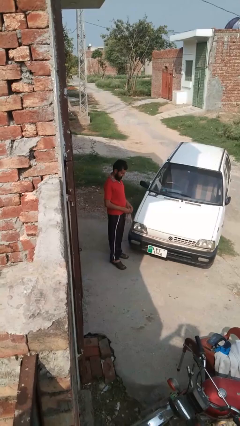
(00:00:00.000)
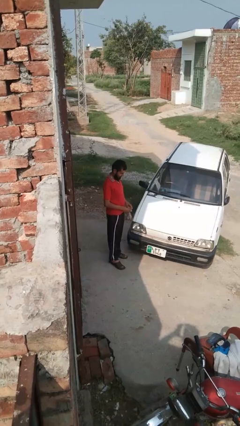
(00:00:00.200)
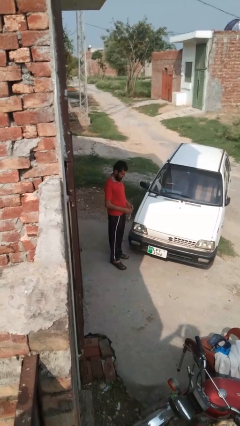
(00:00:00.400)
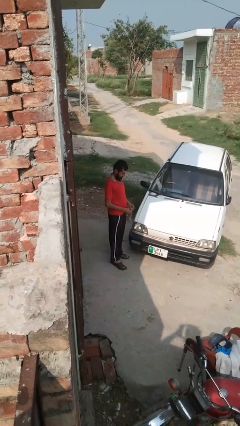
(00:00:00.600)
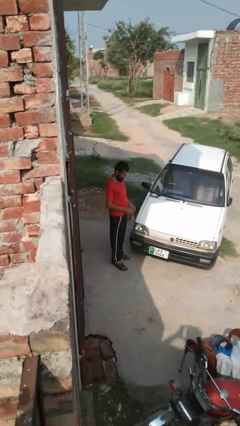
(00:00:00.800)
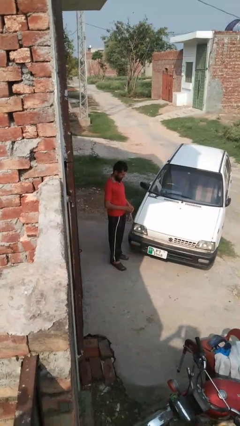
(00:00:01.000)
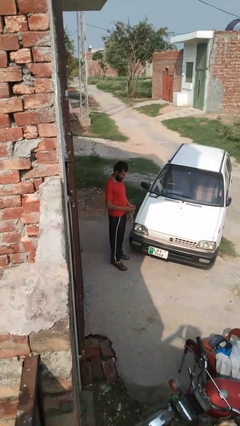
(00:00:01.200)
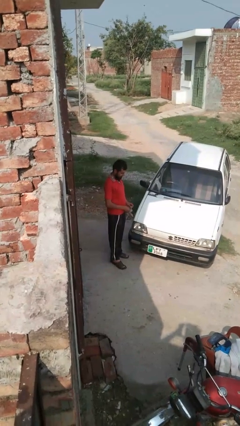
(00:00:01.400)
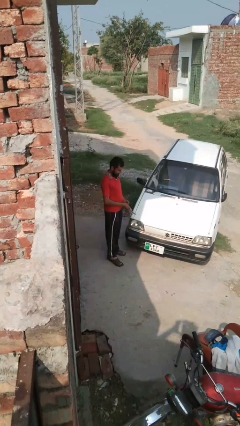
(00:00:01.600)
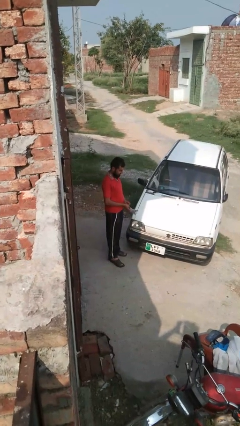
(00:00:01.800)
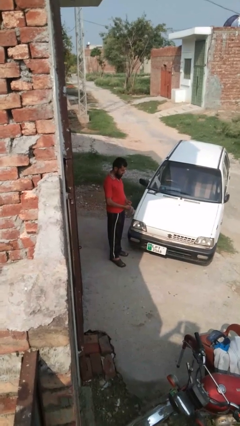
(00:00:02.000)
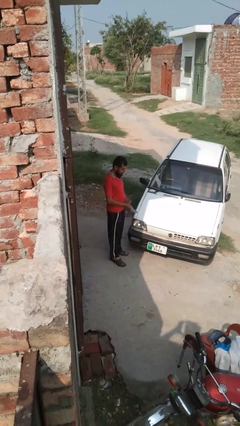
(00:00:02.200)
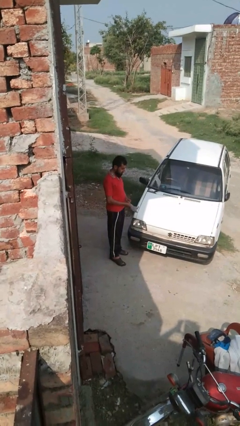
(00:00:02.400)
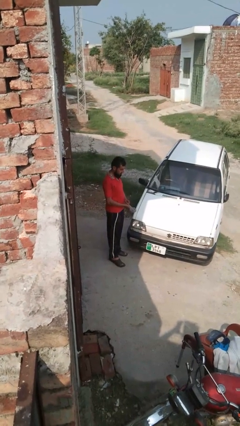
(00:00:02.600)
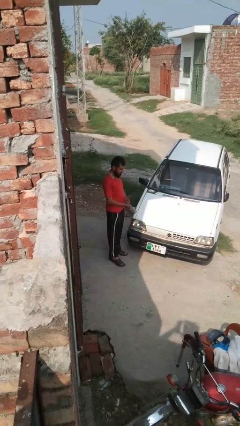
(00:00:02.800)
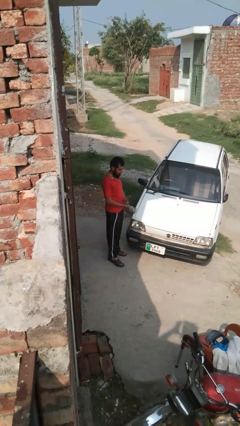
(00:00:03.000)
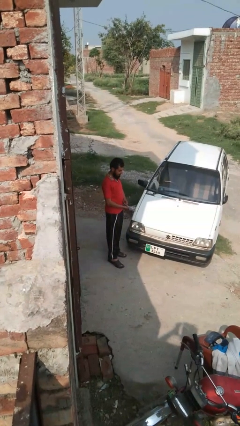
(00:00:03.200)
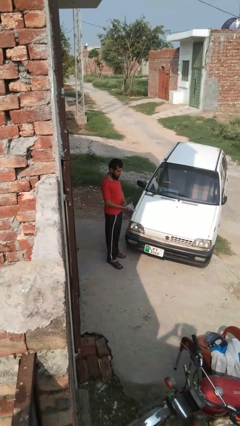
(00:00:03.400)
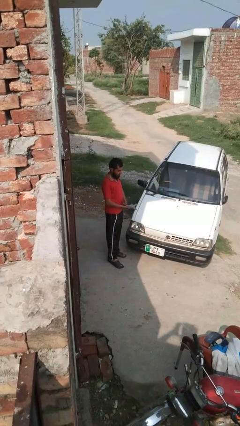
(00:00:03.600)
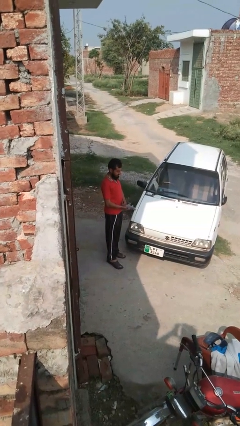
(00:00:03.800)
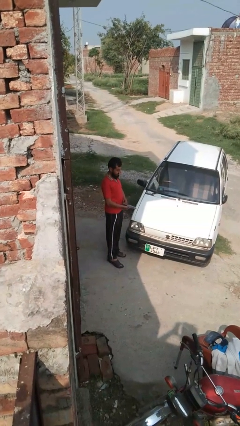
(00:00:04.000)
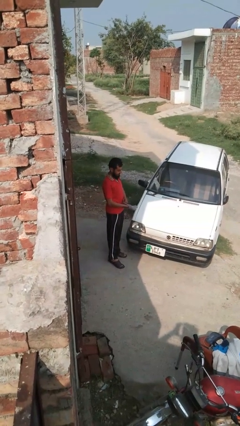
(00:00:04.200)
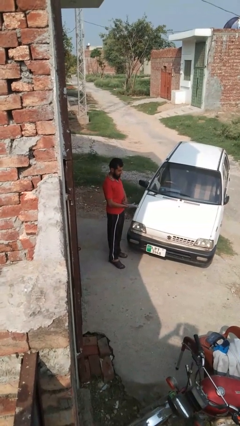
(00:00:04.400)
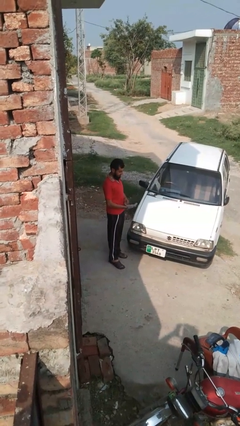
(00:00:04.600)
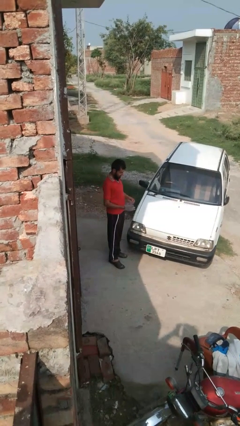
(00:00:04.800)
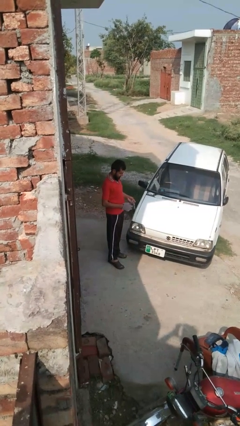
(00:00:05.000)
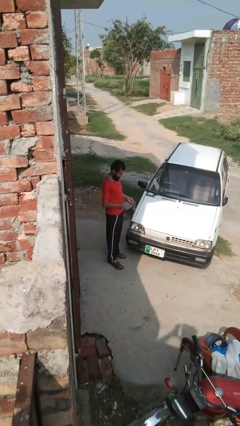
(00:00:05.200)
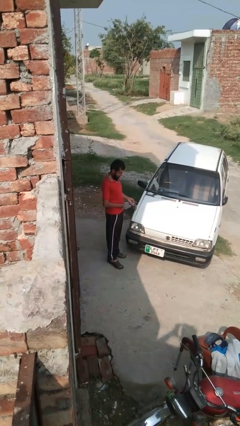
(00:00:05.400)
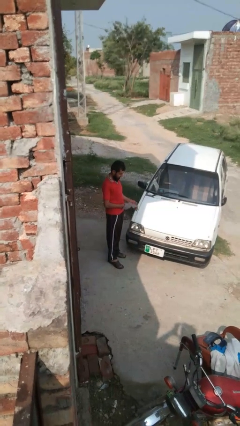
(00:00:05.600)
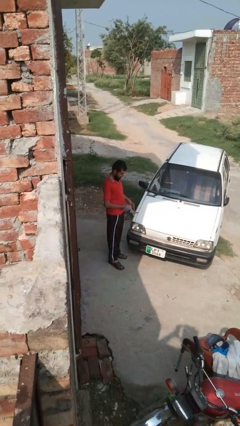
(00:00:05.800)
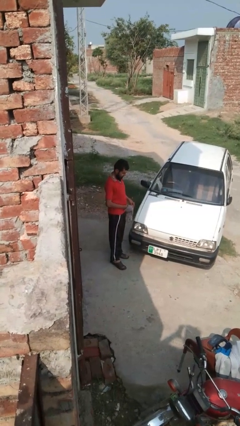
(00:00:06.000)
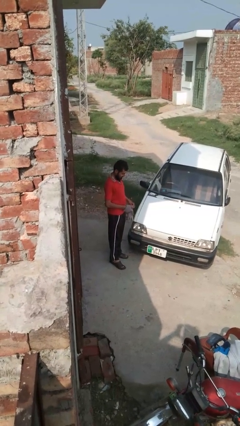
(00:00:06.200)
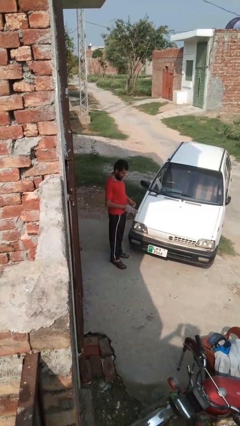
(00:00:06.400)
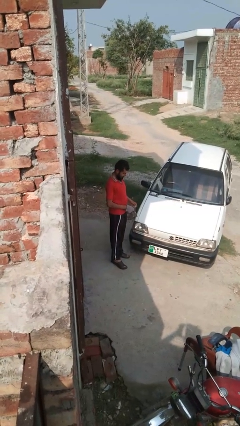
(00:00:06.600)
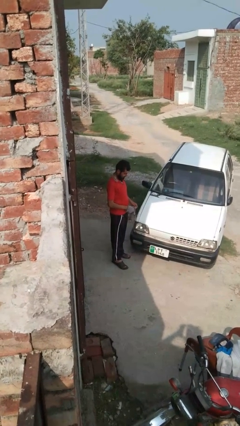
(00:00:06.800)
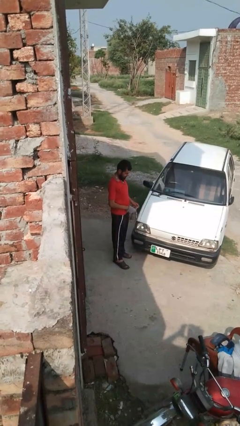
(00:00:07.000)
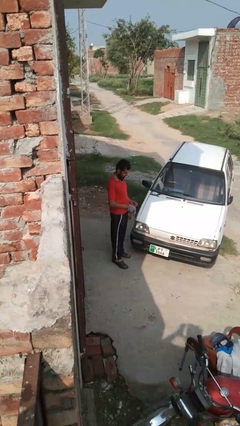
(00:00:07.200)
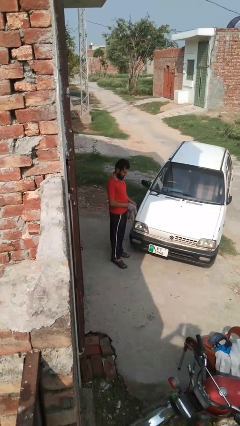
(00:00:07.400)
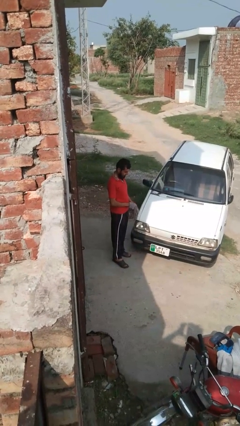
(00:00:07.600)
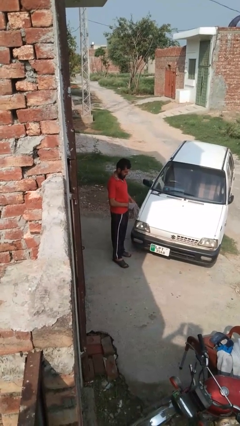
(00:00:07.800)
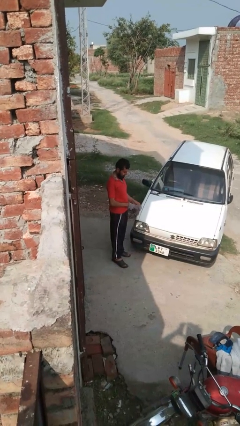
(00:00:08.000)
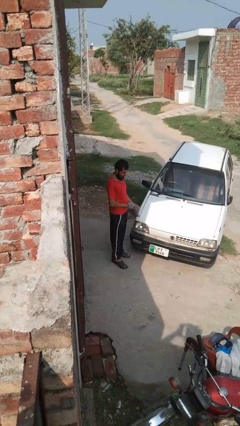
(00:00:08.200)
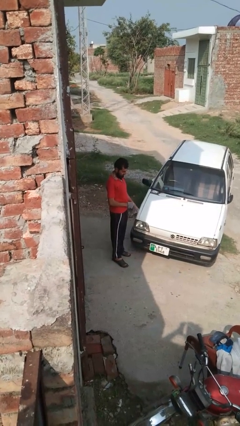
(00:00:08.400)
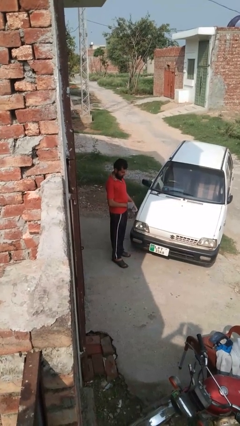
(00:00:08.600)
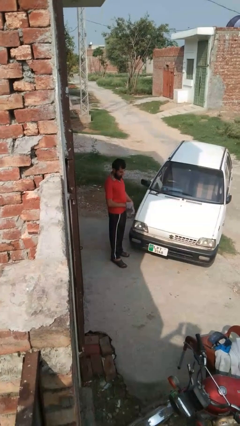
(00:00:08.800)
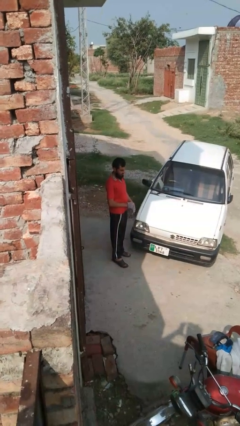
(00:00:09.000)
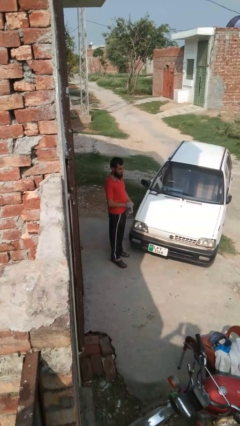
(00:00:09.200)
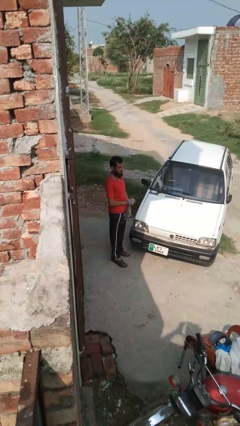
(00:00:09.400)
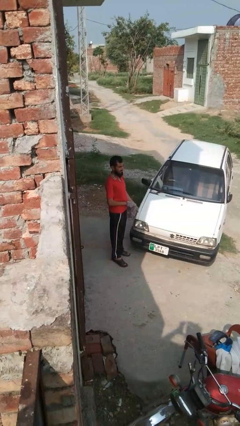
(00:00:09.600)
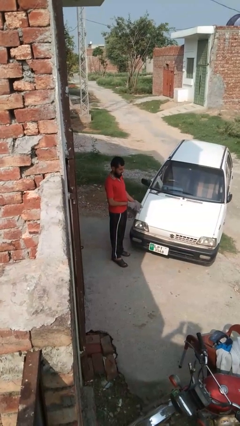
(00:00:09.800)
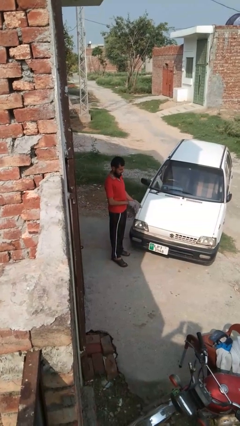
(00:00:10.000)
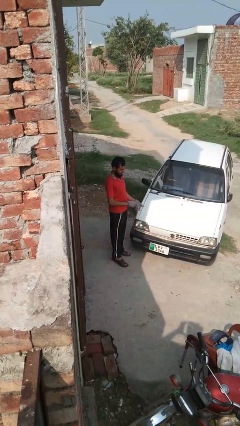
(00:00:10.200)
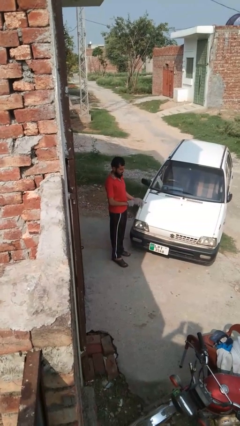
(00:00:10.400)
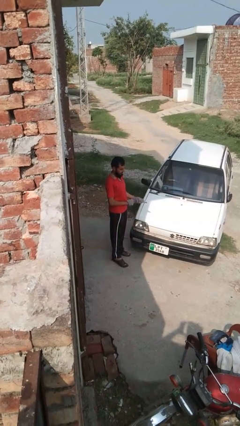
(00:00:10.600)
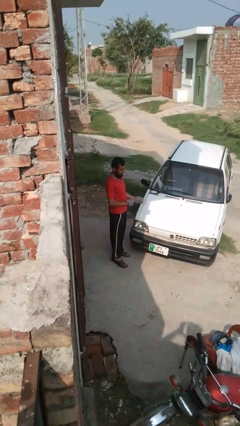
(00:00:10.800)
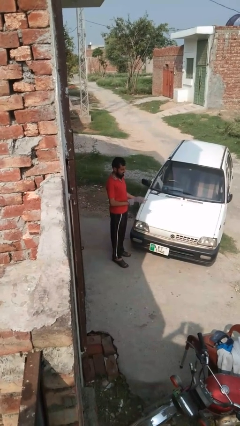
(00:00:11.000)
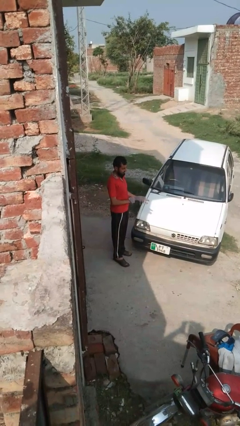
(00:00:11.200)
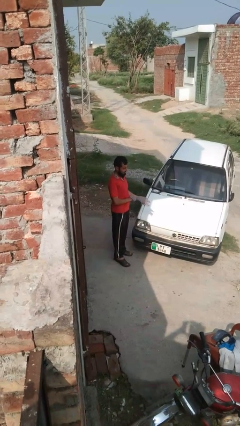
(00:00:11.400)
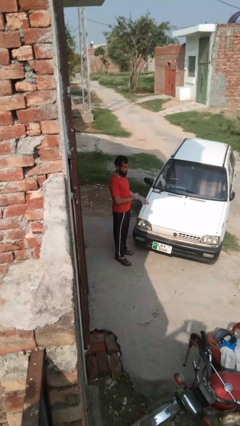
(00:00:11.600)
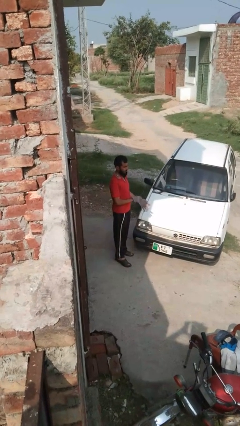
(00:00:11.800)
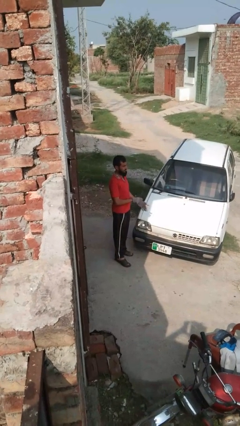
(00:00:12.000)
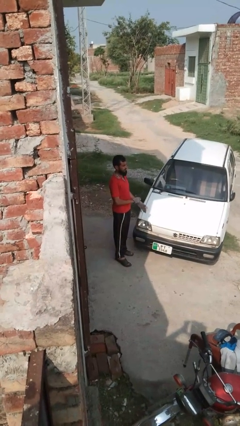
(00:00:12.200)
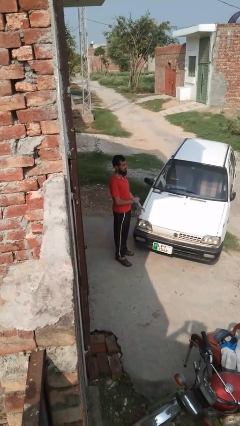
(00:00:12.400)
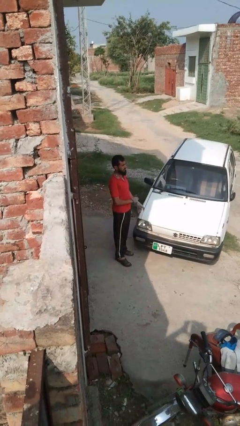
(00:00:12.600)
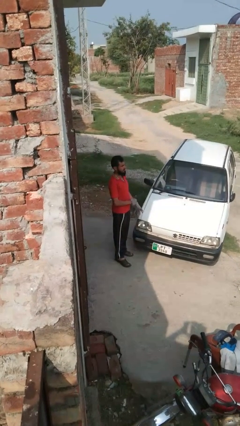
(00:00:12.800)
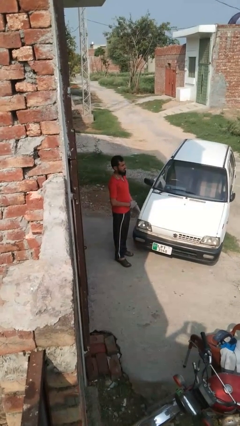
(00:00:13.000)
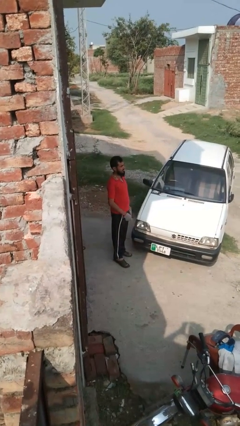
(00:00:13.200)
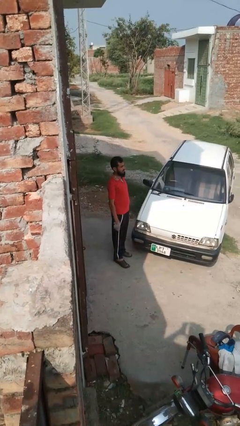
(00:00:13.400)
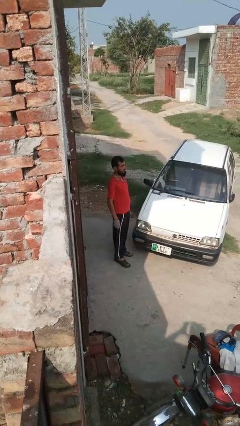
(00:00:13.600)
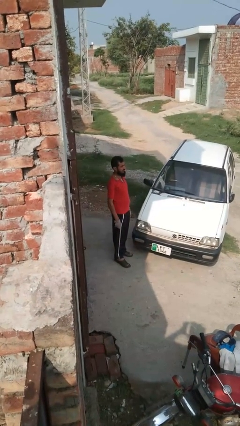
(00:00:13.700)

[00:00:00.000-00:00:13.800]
person puts on gloves

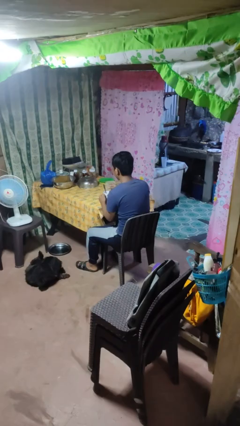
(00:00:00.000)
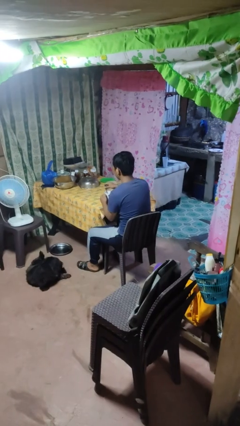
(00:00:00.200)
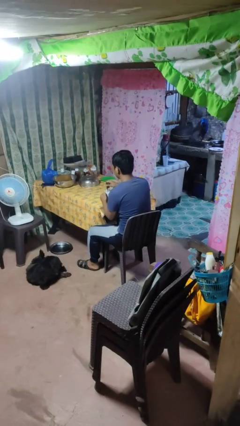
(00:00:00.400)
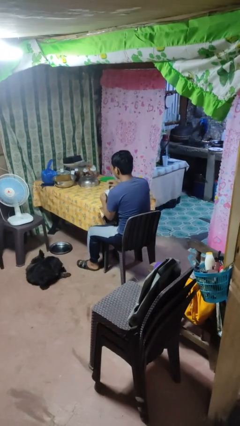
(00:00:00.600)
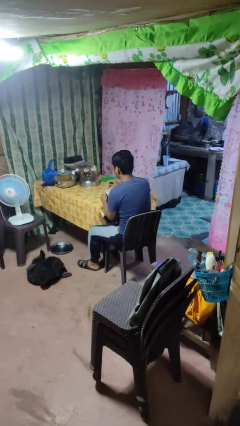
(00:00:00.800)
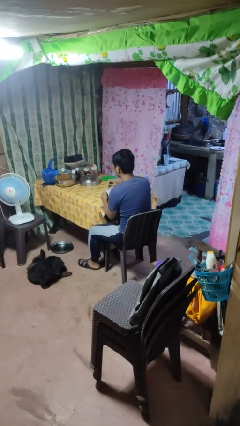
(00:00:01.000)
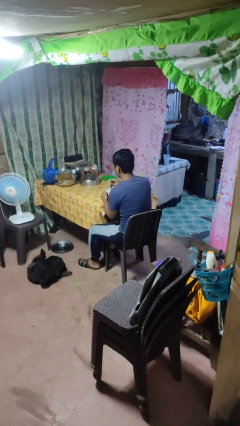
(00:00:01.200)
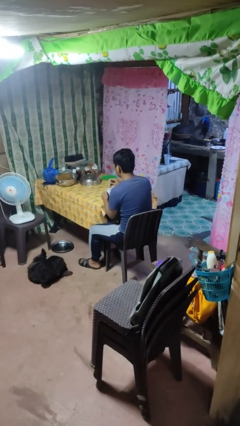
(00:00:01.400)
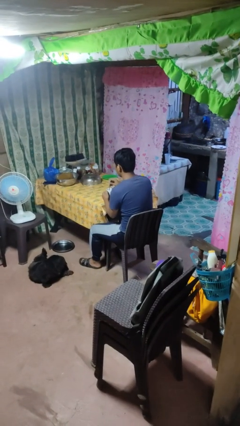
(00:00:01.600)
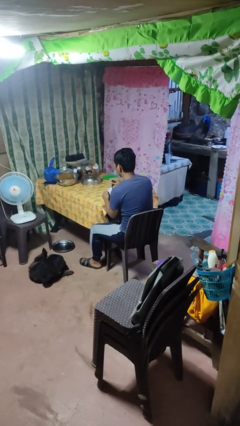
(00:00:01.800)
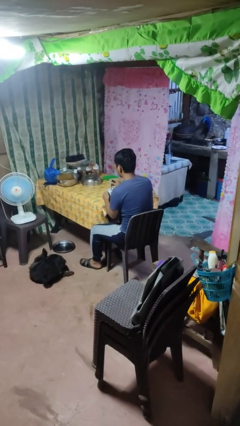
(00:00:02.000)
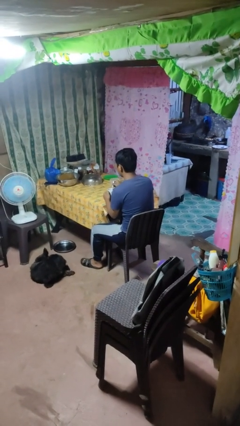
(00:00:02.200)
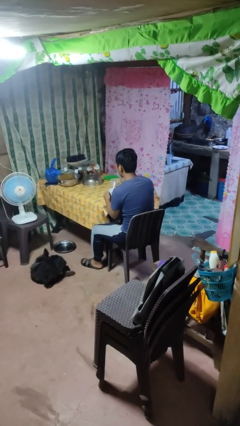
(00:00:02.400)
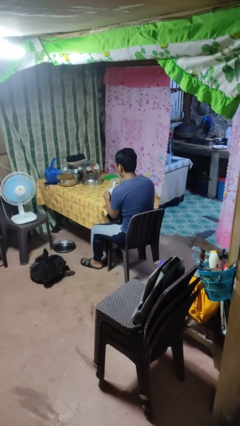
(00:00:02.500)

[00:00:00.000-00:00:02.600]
person stirs mug

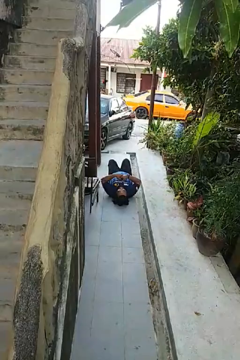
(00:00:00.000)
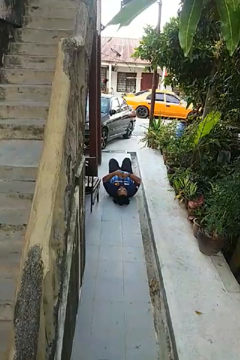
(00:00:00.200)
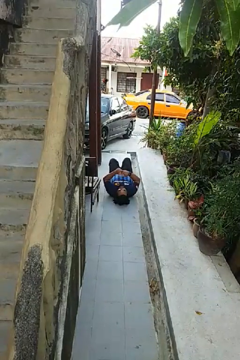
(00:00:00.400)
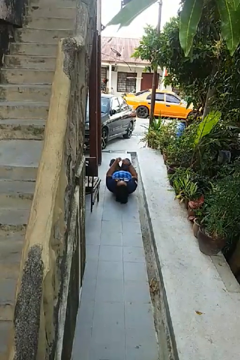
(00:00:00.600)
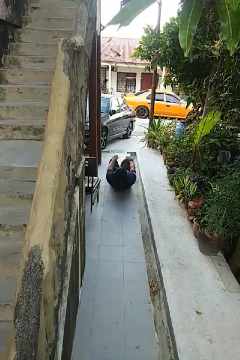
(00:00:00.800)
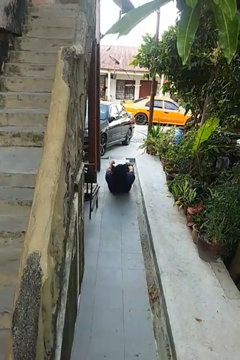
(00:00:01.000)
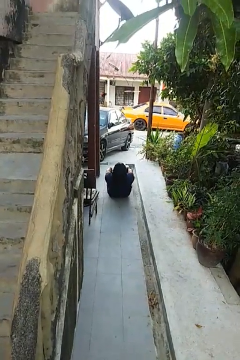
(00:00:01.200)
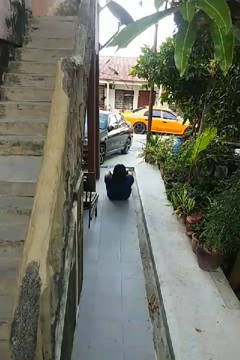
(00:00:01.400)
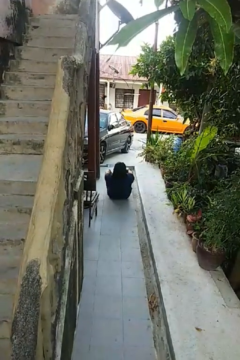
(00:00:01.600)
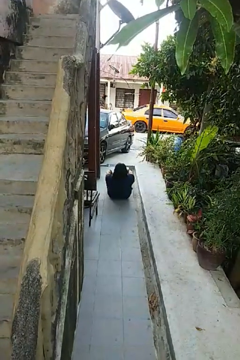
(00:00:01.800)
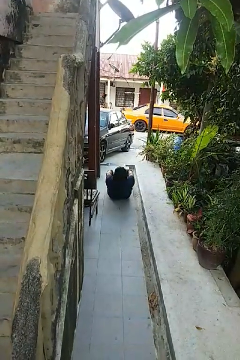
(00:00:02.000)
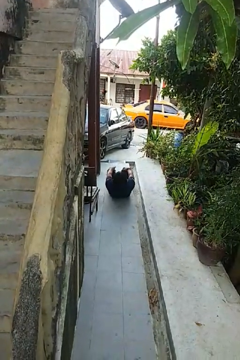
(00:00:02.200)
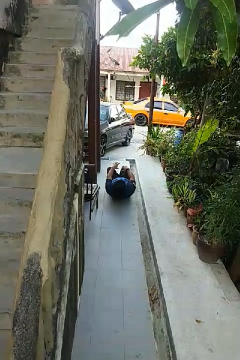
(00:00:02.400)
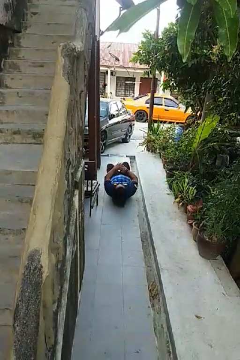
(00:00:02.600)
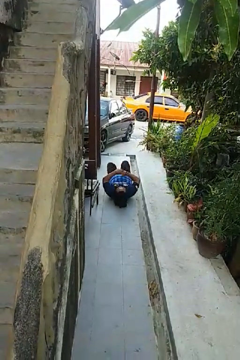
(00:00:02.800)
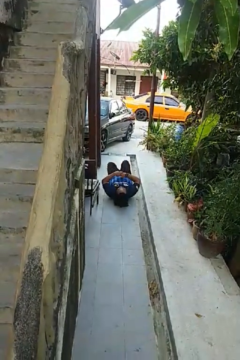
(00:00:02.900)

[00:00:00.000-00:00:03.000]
person exercises with situp
